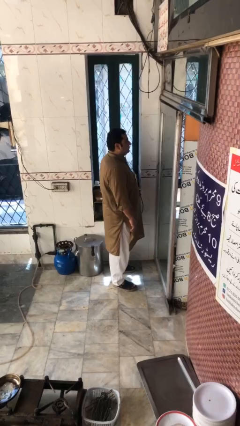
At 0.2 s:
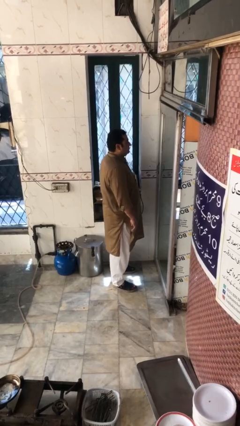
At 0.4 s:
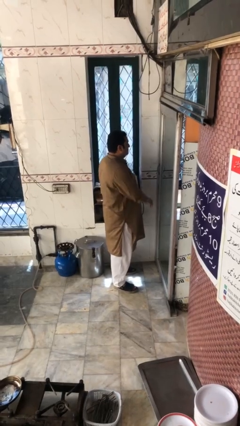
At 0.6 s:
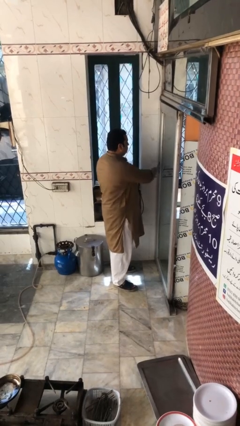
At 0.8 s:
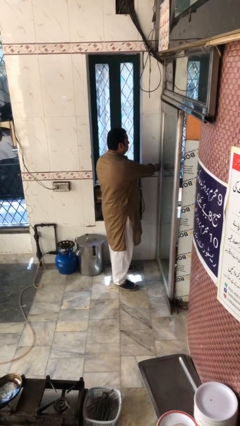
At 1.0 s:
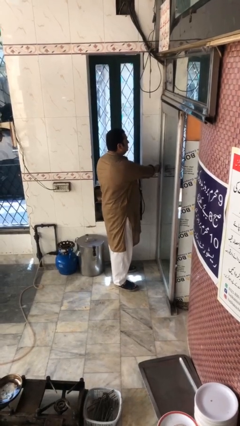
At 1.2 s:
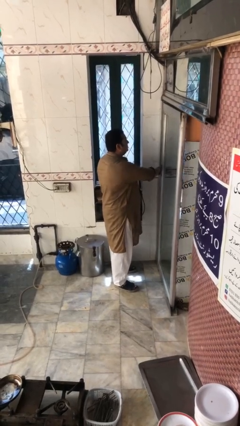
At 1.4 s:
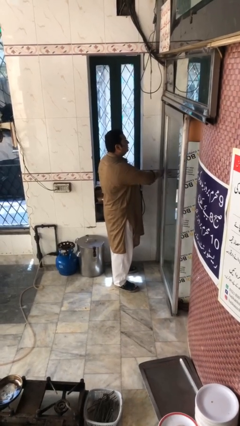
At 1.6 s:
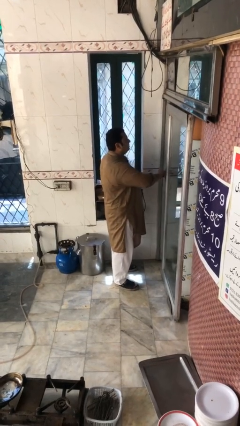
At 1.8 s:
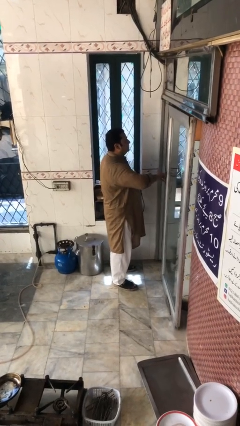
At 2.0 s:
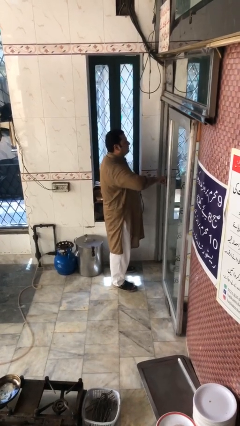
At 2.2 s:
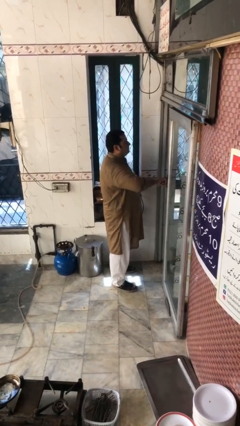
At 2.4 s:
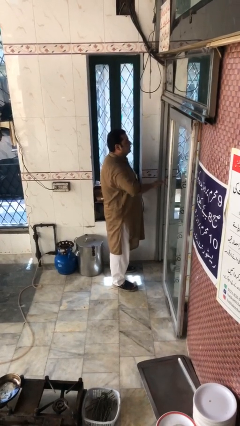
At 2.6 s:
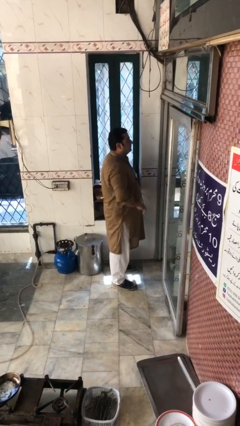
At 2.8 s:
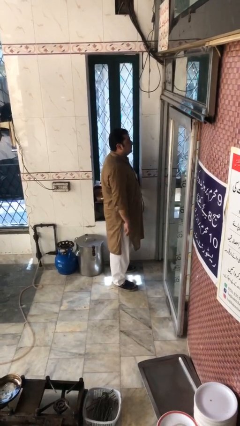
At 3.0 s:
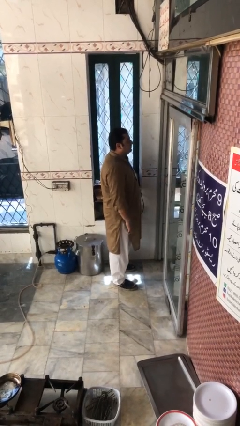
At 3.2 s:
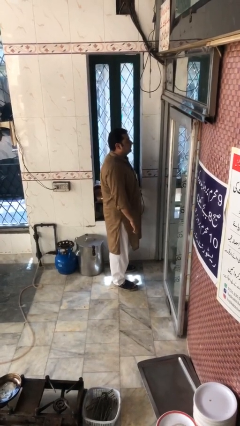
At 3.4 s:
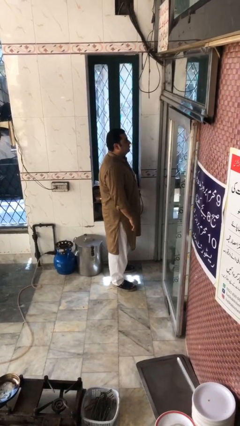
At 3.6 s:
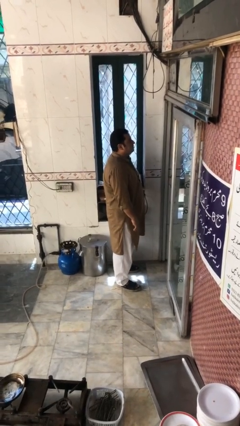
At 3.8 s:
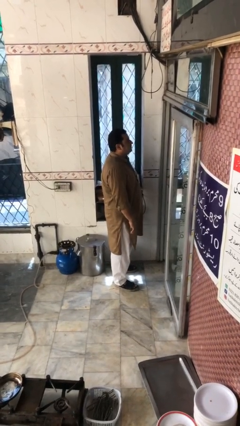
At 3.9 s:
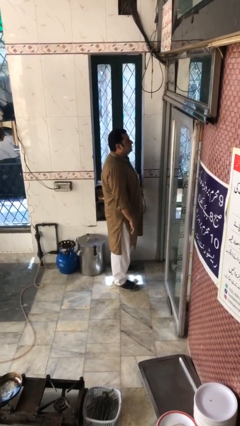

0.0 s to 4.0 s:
person opens sliding door

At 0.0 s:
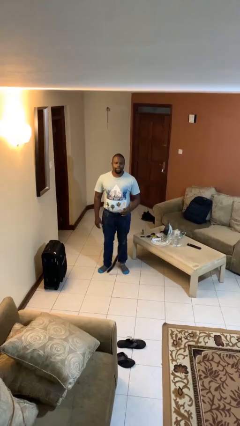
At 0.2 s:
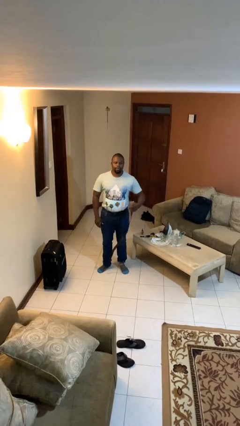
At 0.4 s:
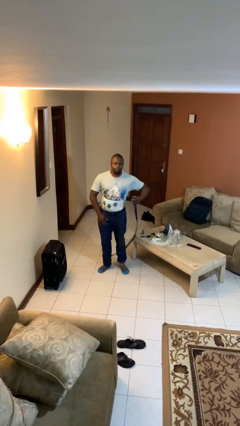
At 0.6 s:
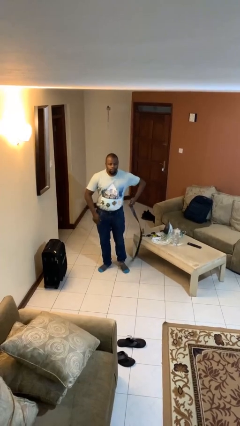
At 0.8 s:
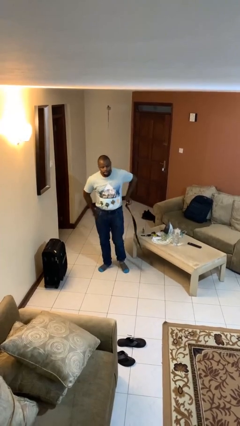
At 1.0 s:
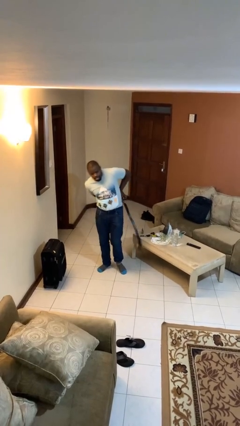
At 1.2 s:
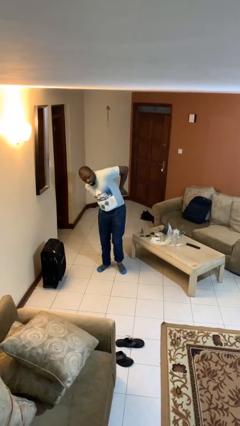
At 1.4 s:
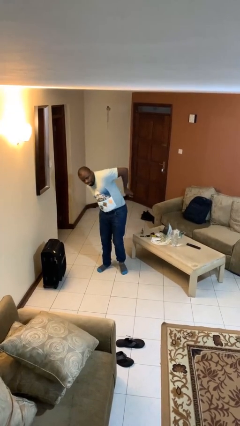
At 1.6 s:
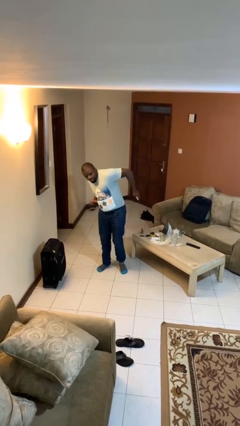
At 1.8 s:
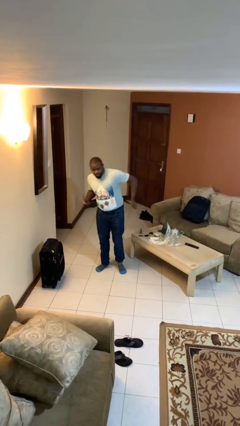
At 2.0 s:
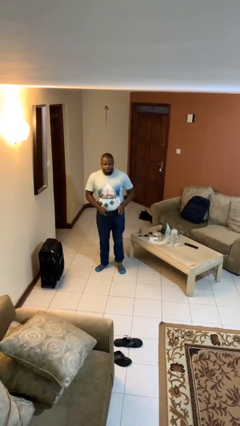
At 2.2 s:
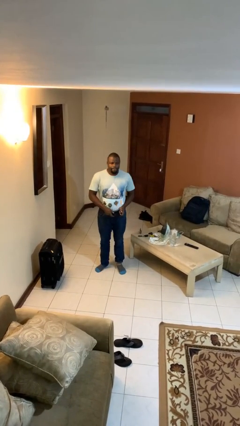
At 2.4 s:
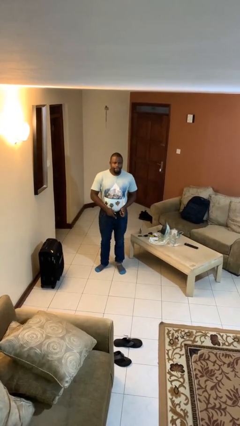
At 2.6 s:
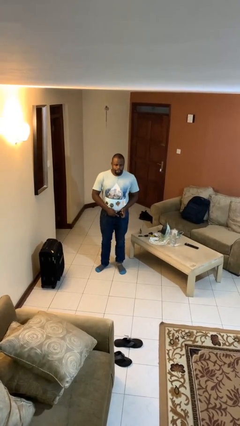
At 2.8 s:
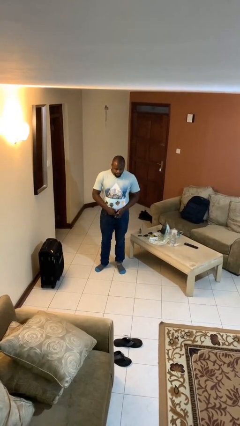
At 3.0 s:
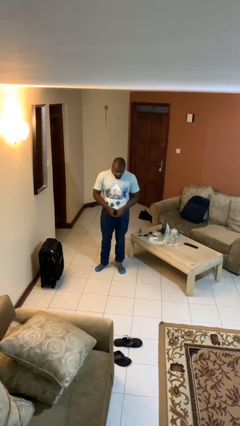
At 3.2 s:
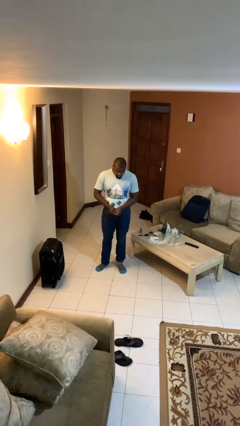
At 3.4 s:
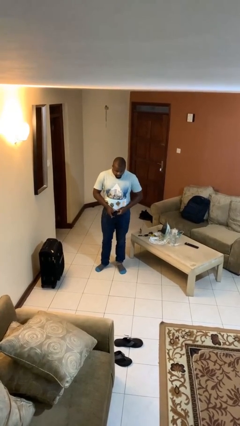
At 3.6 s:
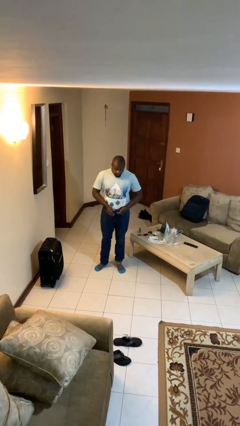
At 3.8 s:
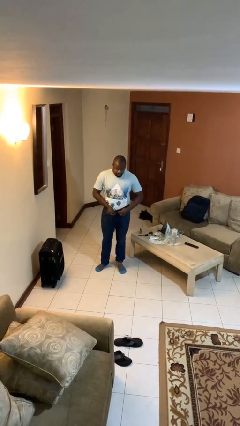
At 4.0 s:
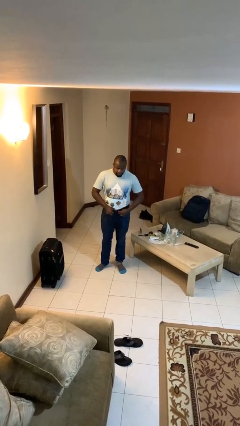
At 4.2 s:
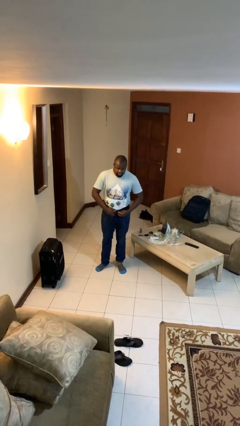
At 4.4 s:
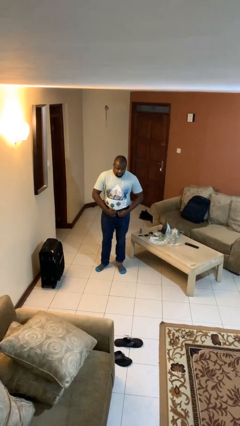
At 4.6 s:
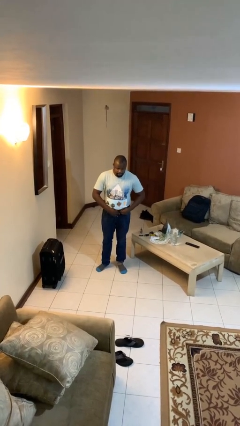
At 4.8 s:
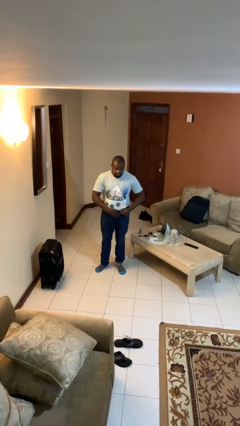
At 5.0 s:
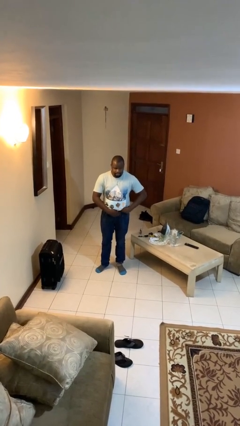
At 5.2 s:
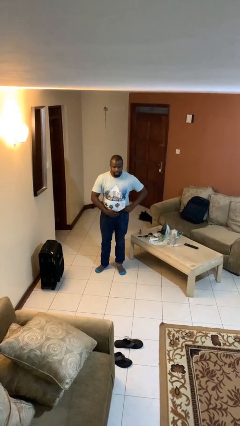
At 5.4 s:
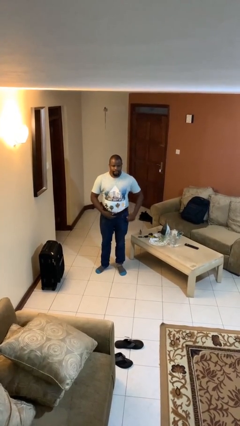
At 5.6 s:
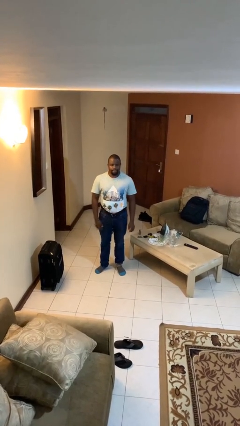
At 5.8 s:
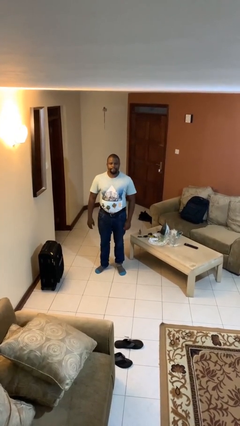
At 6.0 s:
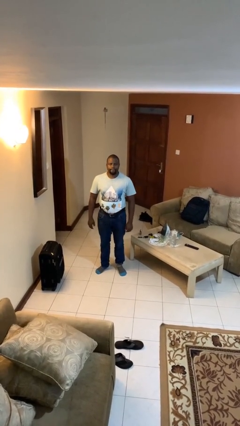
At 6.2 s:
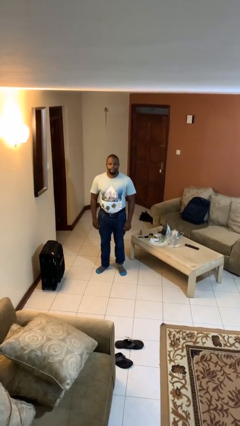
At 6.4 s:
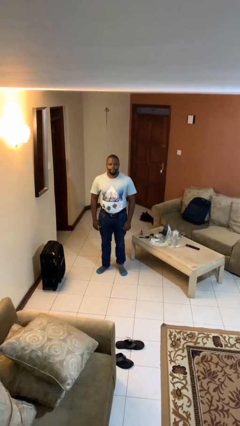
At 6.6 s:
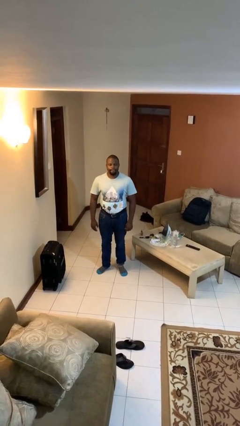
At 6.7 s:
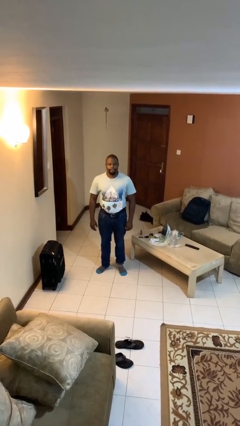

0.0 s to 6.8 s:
person puts on belt

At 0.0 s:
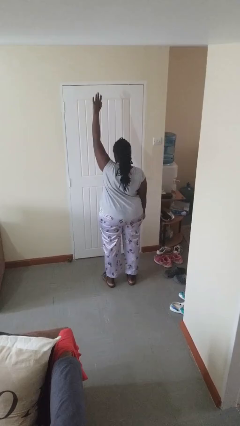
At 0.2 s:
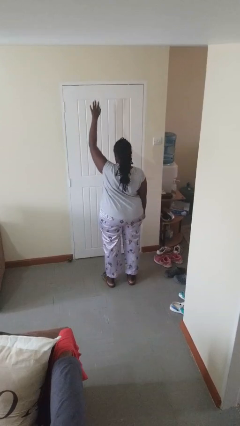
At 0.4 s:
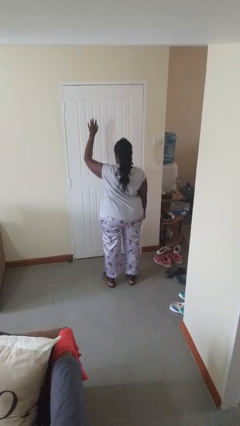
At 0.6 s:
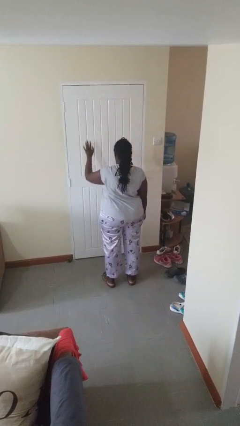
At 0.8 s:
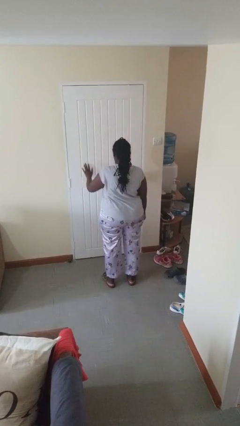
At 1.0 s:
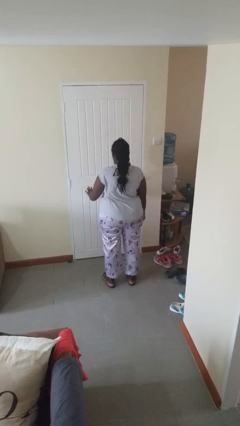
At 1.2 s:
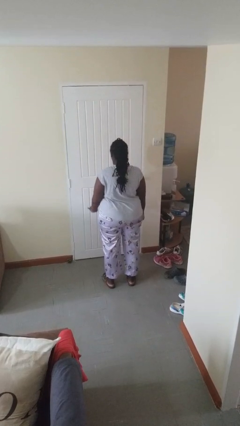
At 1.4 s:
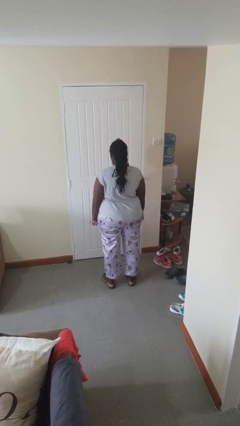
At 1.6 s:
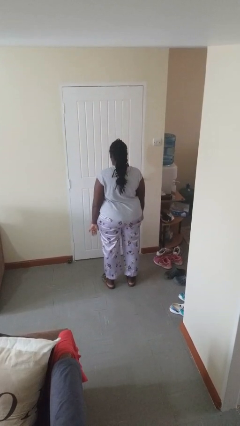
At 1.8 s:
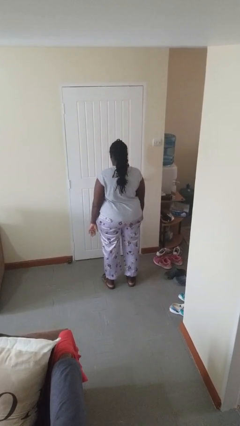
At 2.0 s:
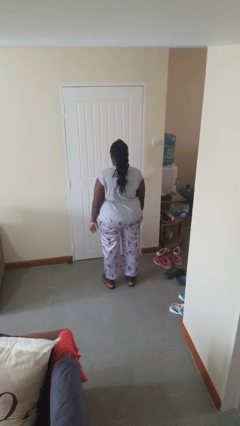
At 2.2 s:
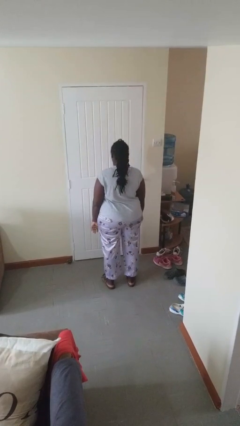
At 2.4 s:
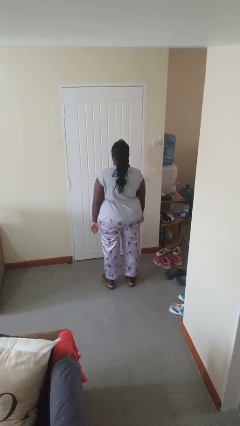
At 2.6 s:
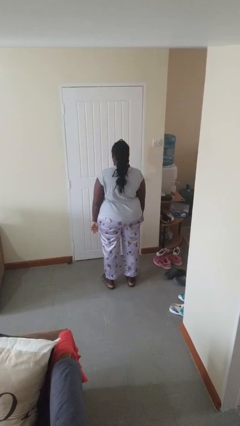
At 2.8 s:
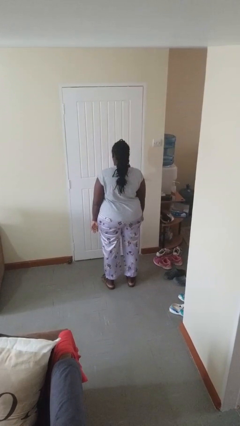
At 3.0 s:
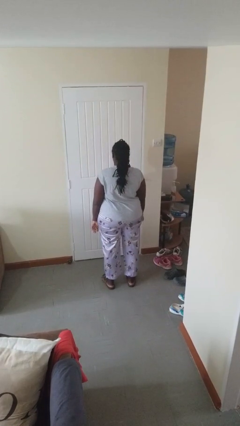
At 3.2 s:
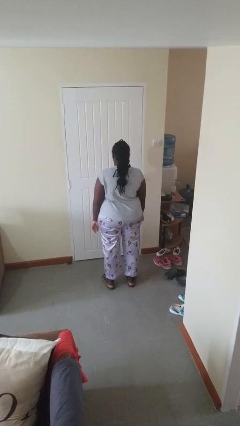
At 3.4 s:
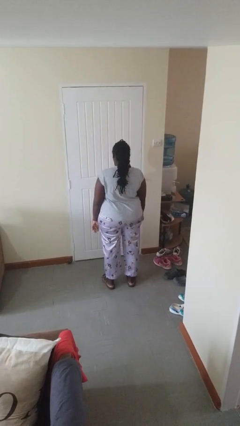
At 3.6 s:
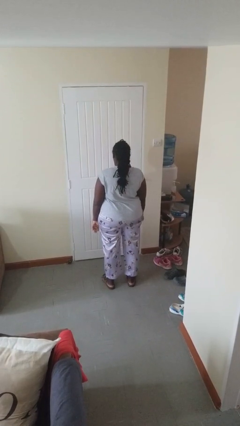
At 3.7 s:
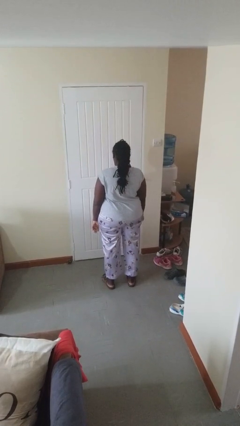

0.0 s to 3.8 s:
person gestures swipe down

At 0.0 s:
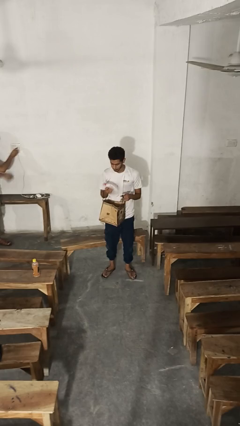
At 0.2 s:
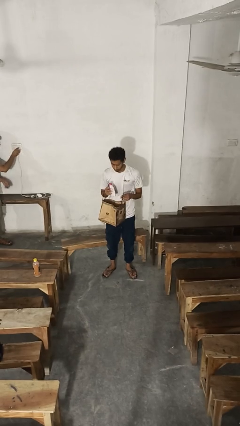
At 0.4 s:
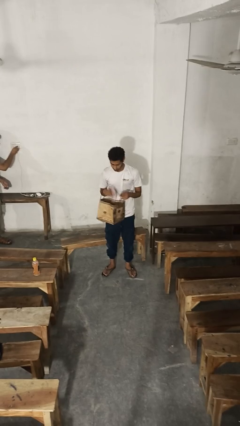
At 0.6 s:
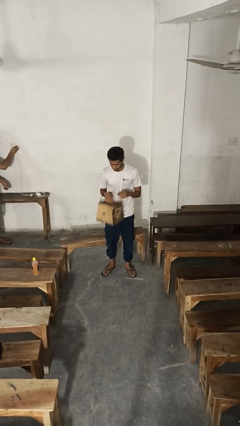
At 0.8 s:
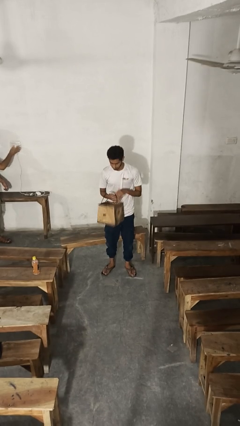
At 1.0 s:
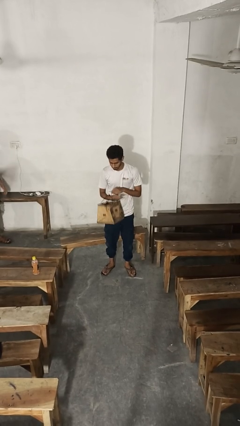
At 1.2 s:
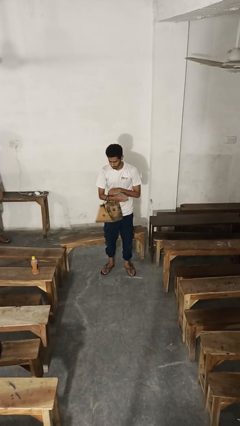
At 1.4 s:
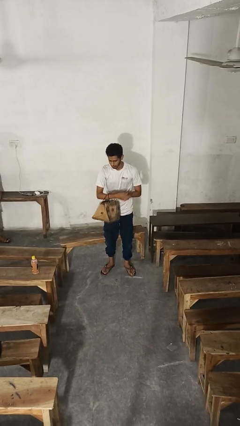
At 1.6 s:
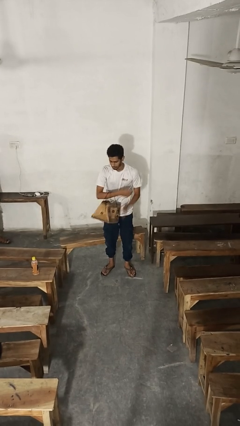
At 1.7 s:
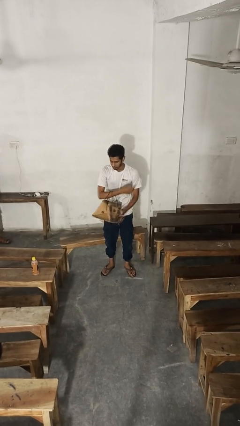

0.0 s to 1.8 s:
person puts object into purse

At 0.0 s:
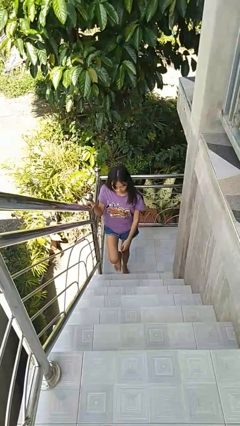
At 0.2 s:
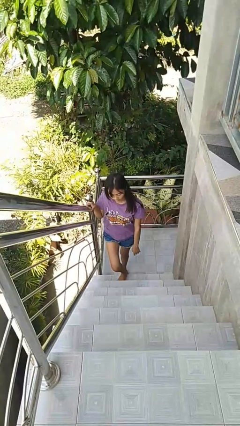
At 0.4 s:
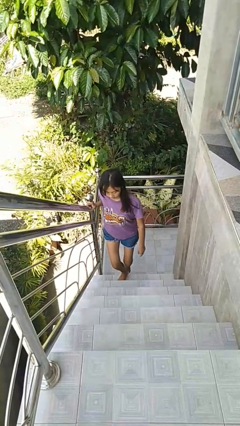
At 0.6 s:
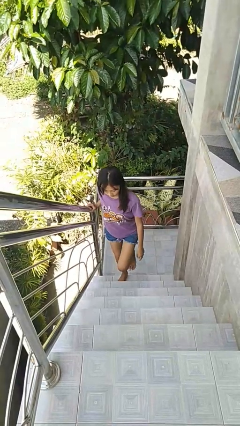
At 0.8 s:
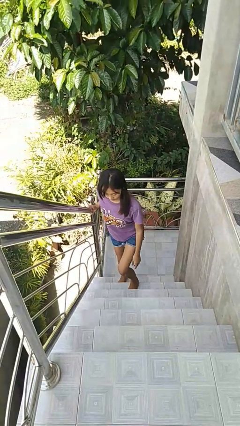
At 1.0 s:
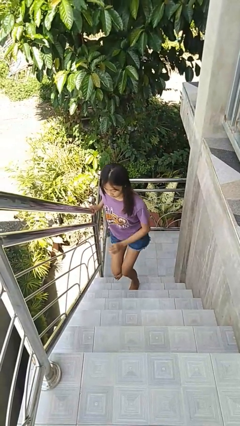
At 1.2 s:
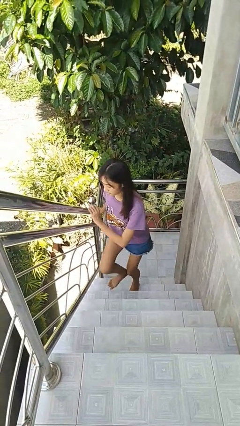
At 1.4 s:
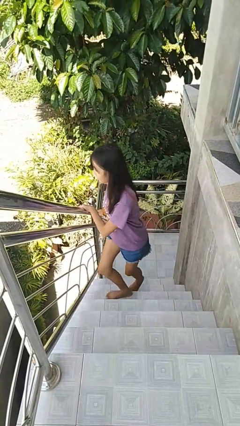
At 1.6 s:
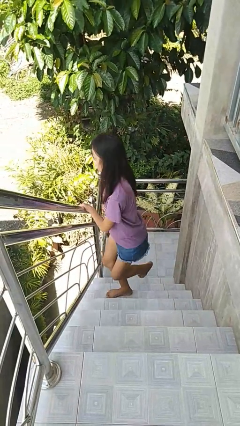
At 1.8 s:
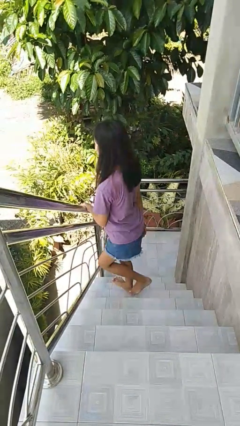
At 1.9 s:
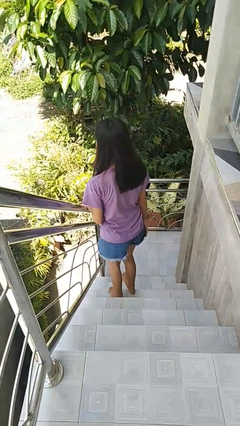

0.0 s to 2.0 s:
person climbs up stairs
